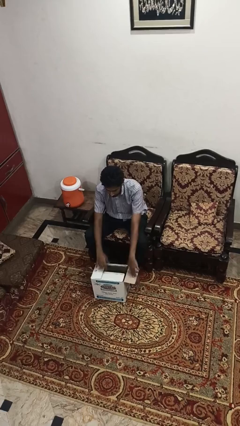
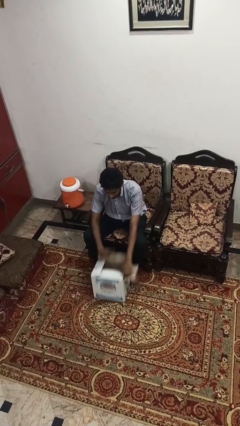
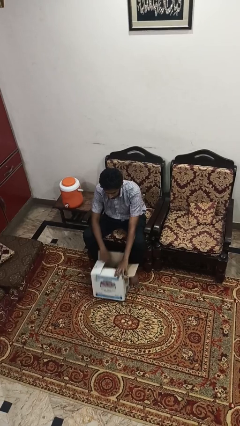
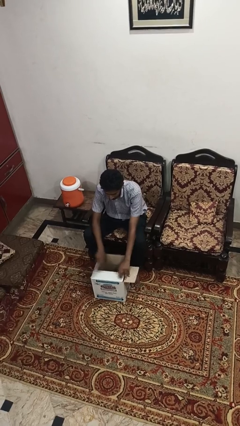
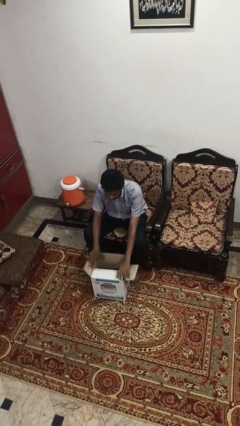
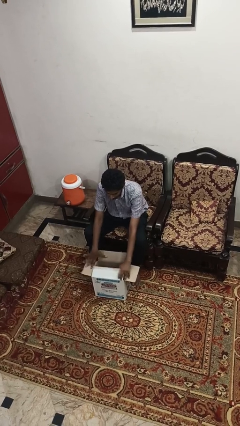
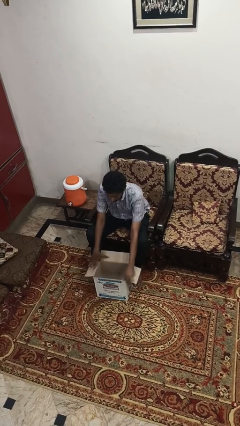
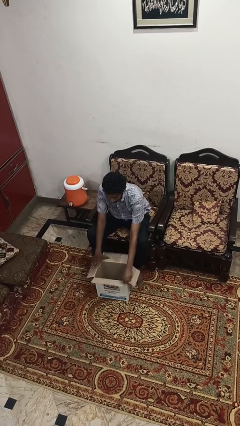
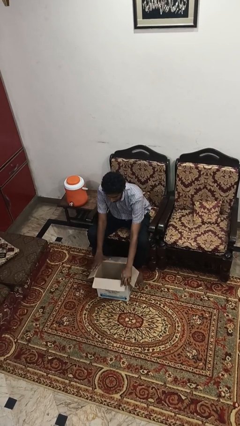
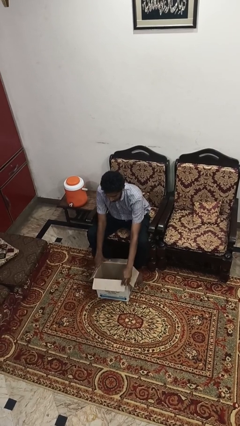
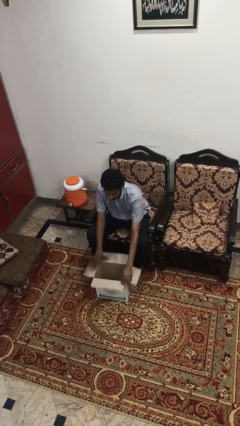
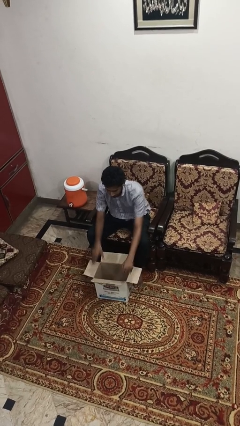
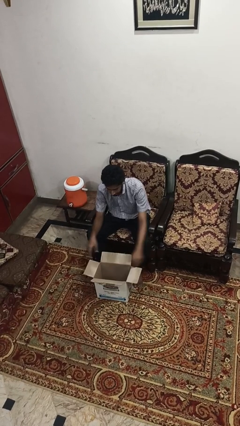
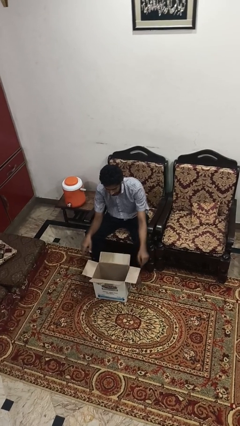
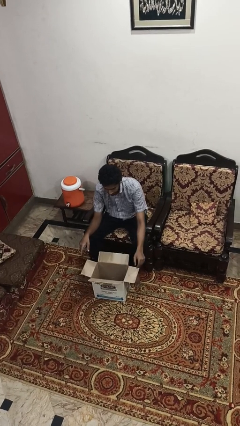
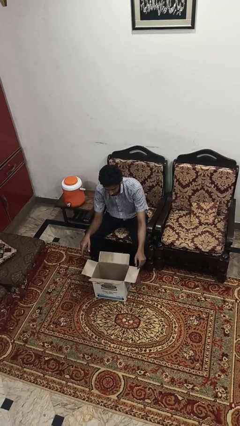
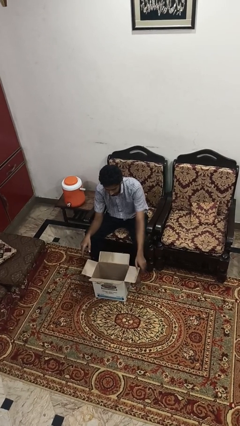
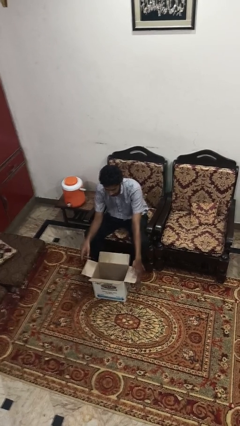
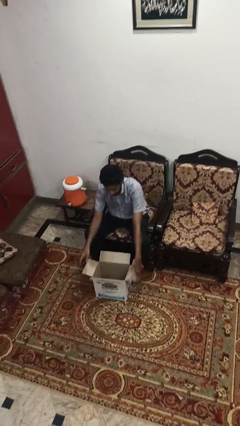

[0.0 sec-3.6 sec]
person opens box

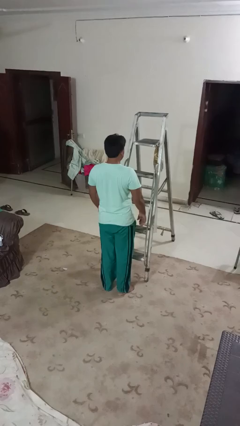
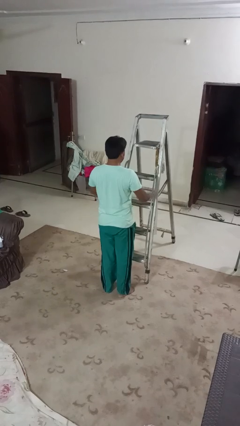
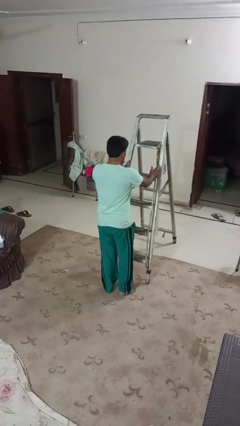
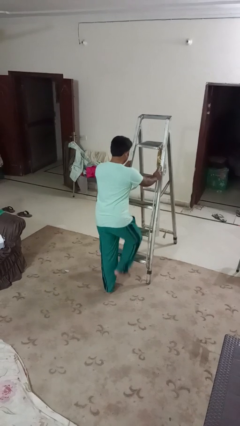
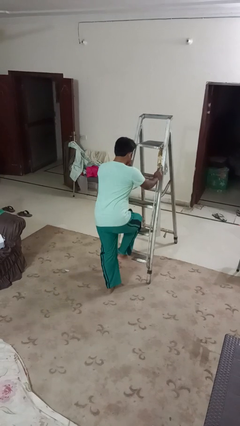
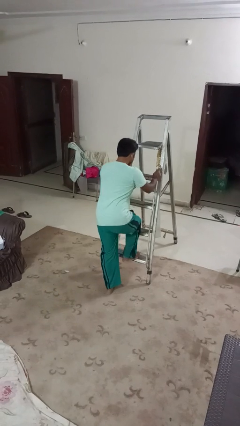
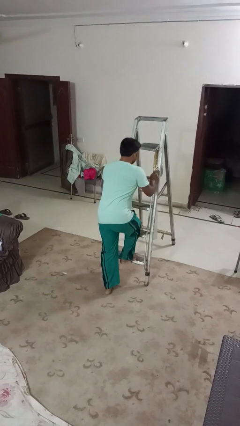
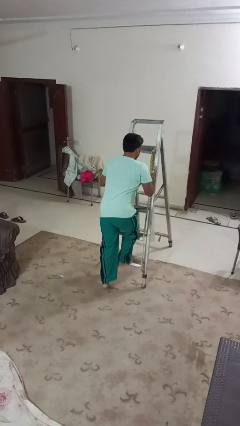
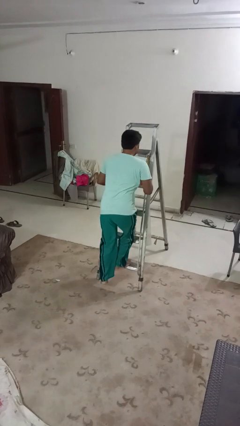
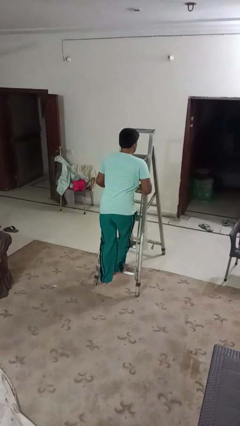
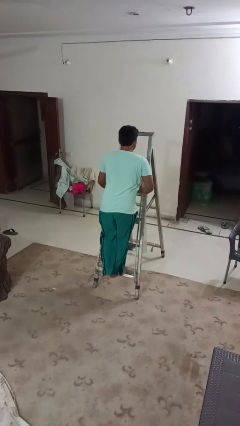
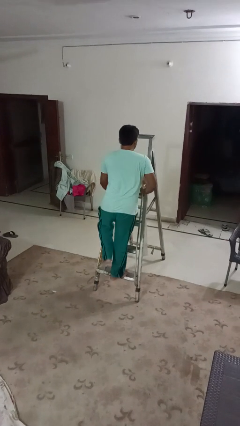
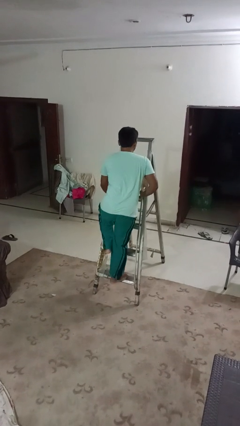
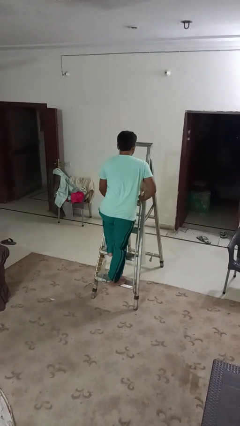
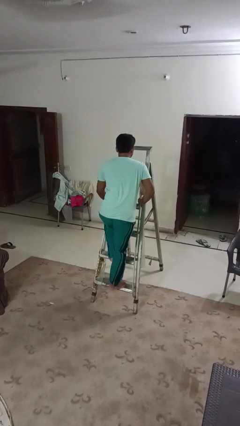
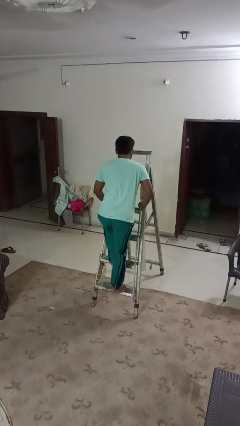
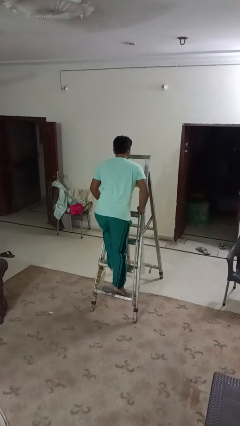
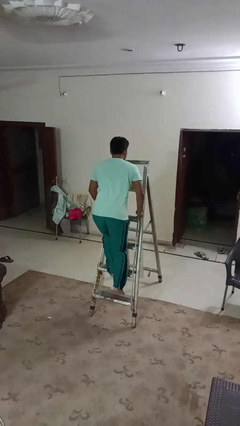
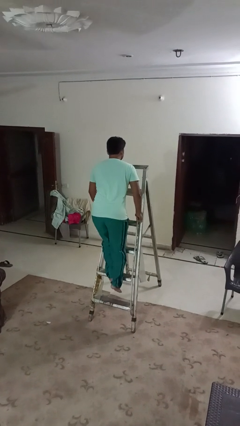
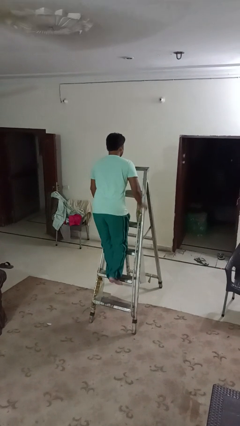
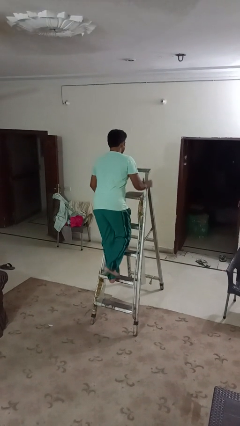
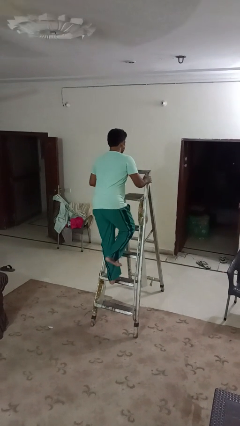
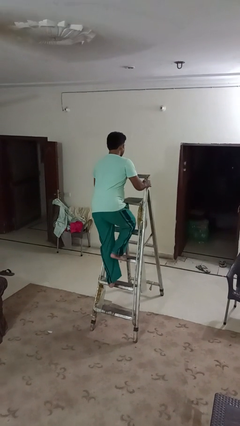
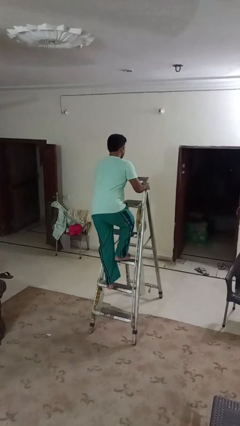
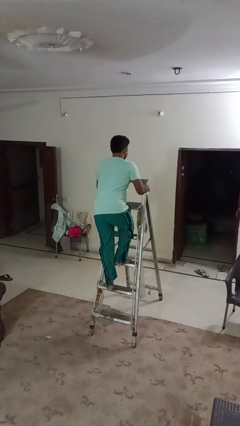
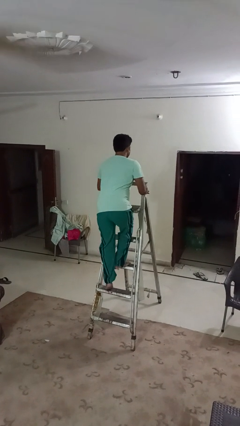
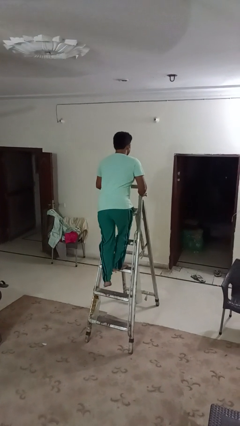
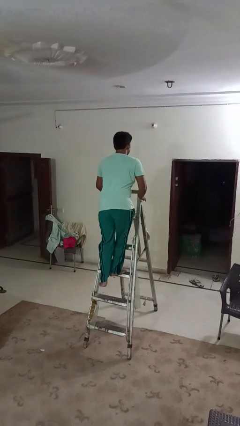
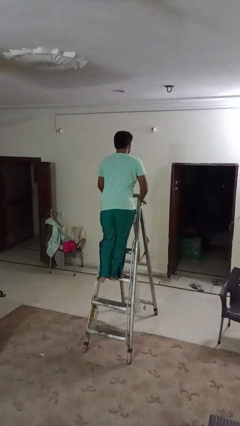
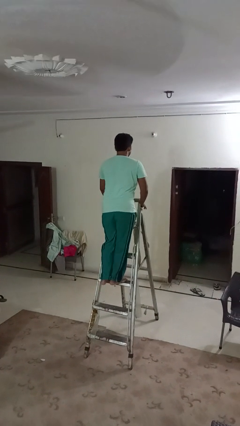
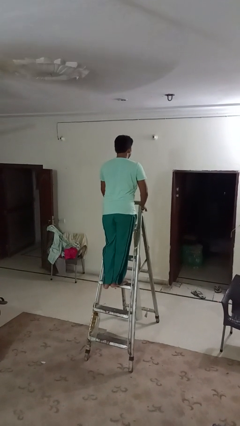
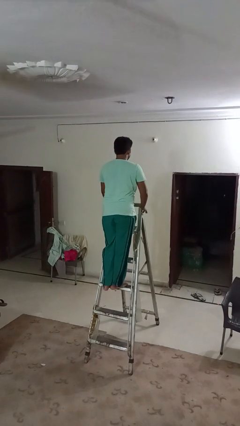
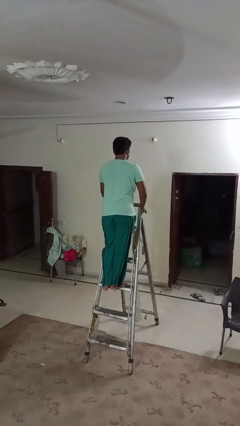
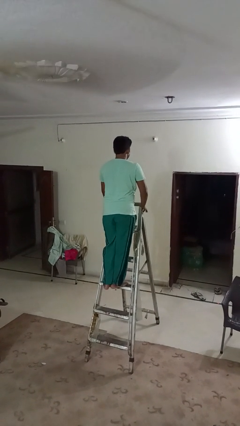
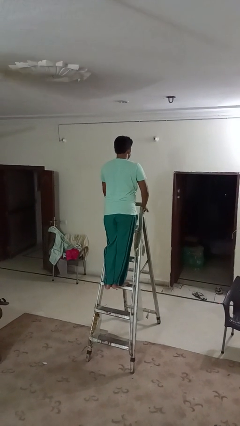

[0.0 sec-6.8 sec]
person climbs up ladder

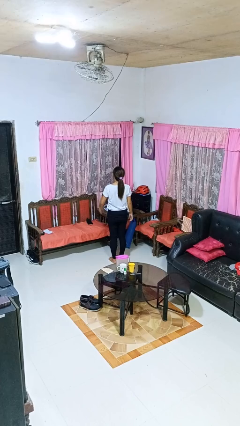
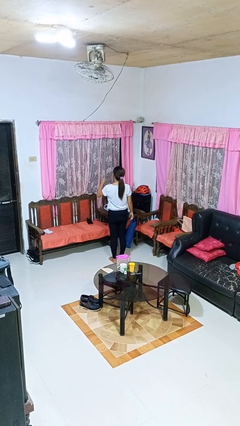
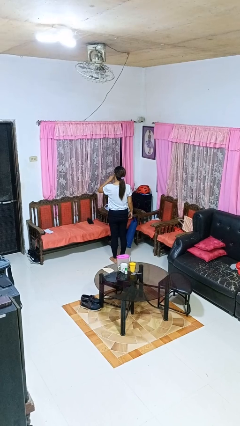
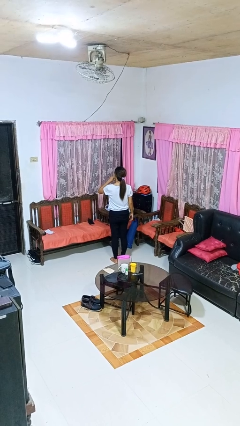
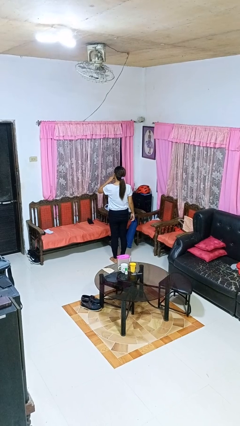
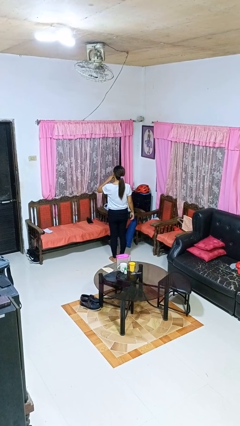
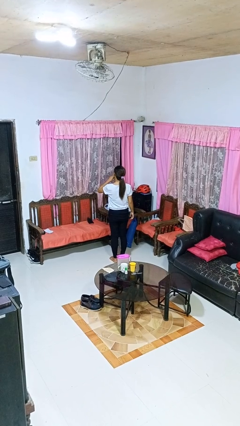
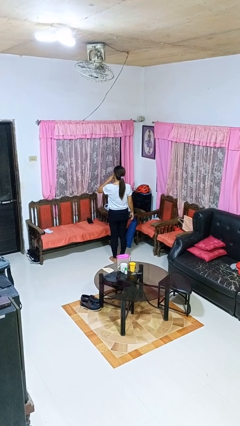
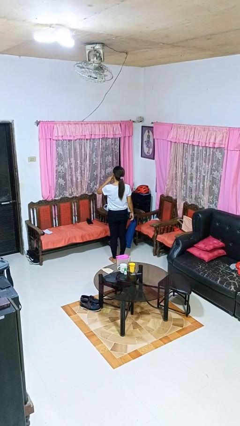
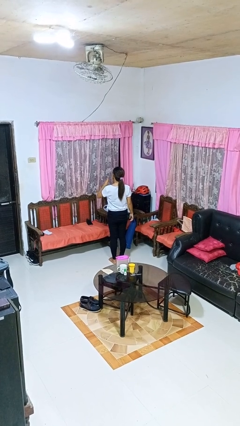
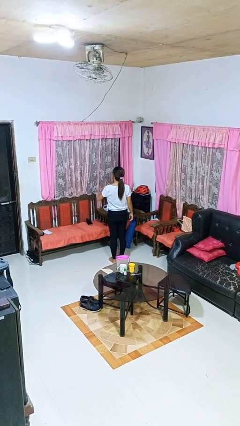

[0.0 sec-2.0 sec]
person gestures be quiet

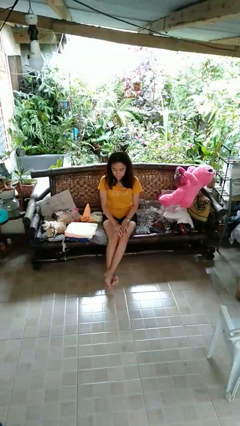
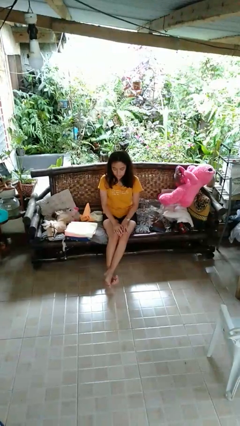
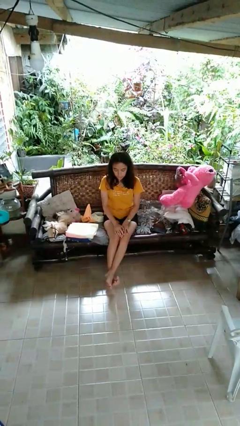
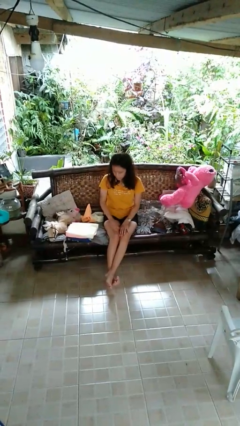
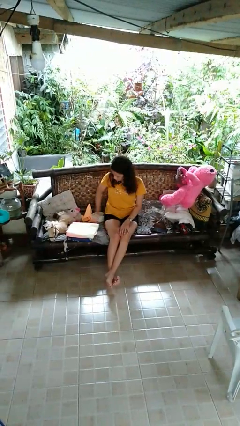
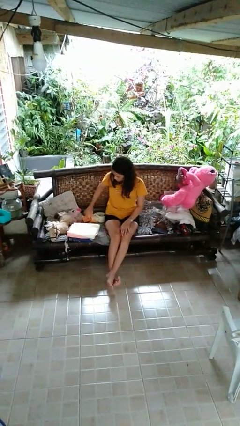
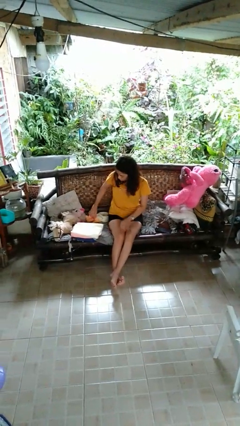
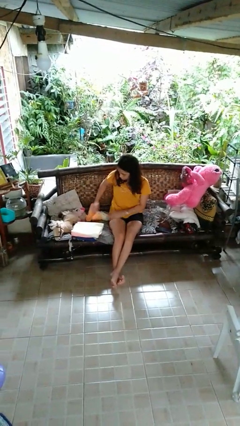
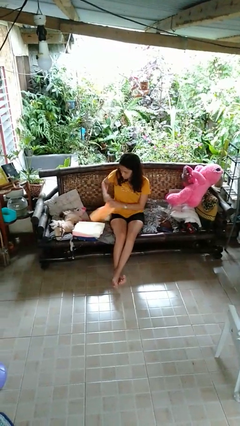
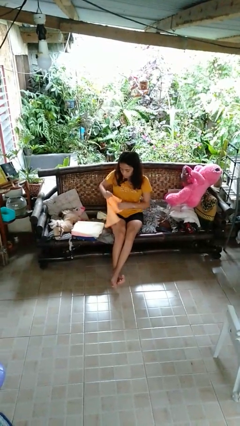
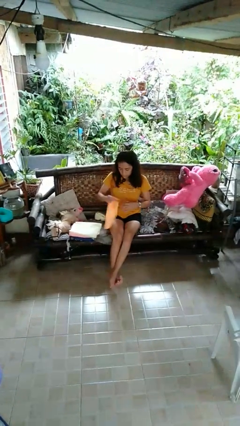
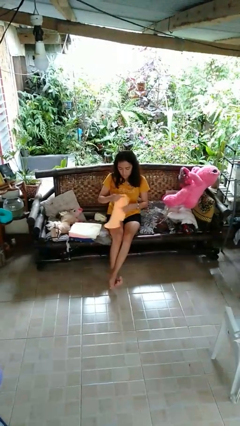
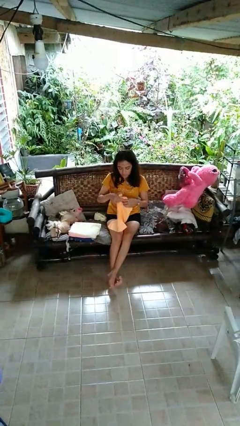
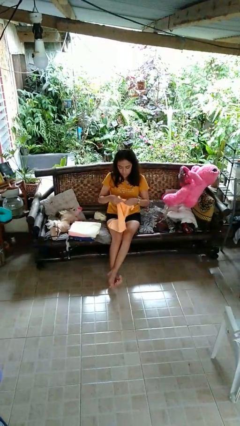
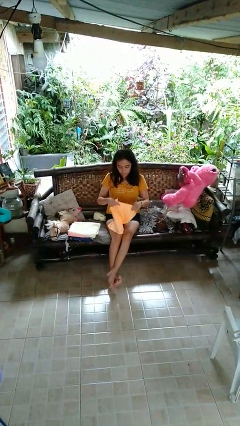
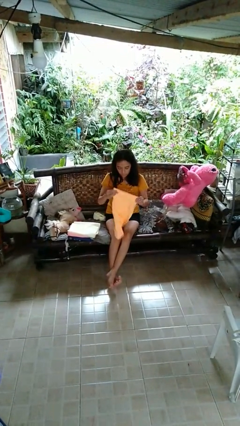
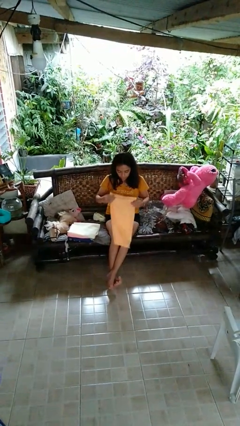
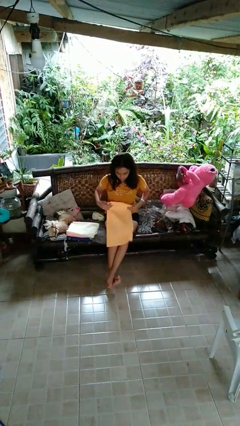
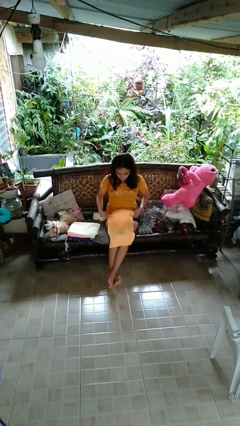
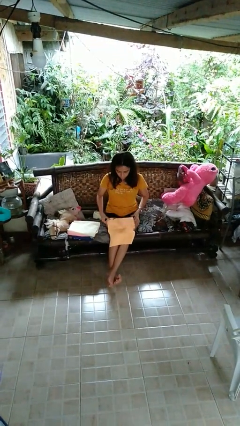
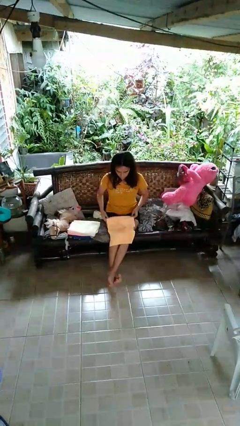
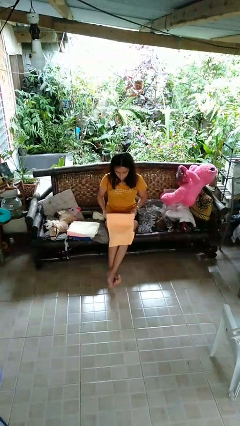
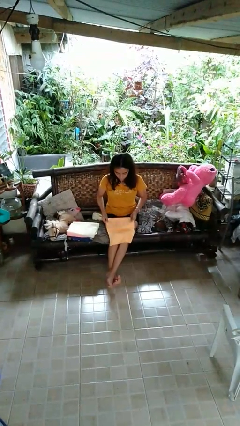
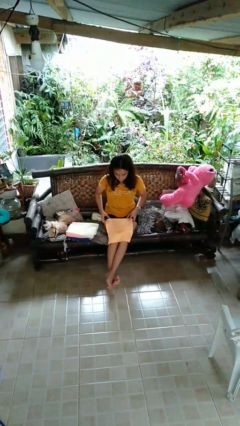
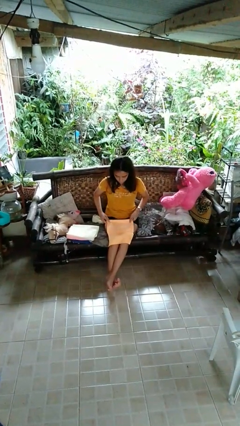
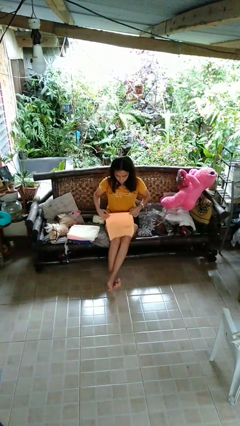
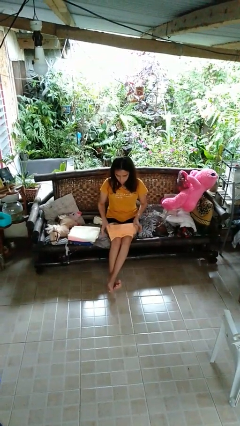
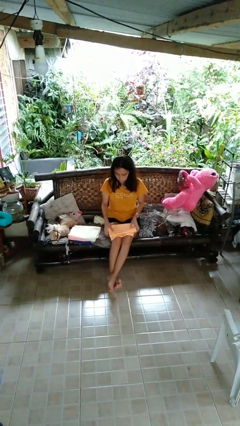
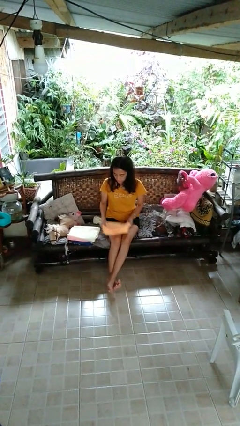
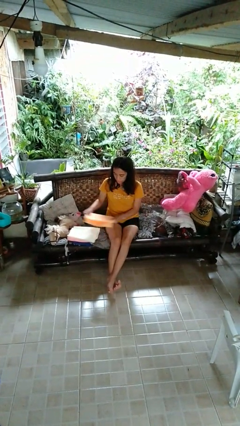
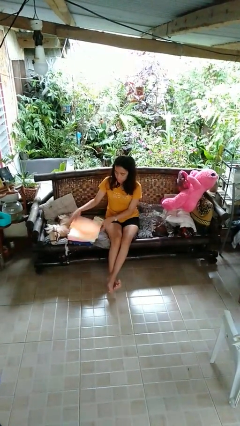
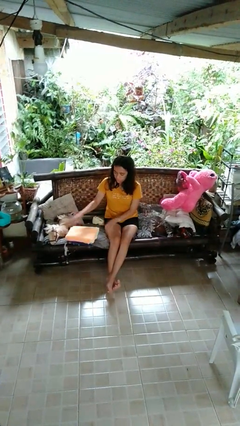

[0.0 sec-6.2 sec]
person folds towel
